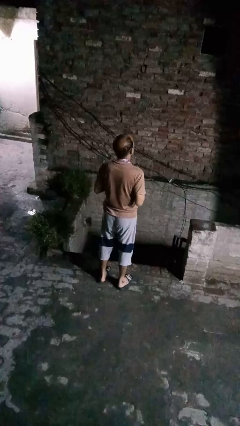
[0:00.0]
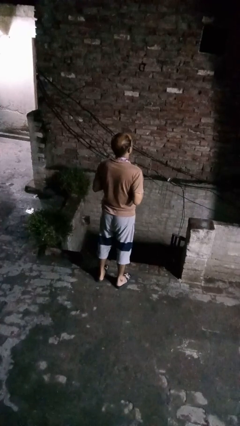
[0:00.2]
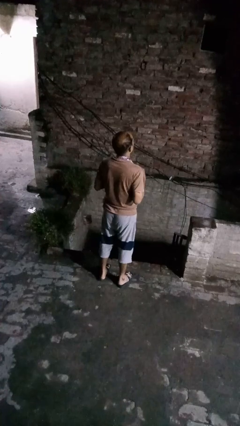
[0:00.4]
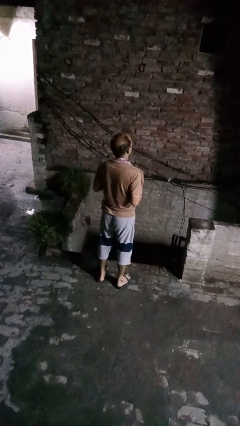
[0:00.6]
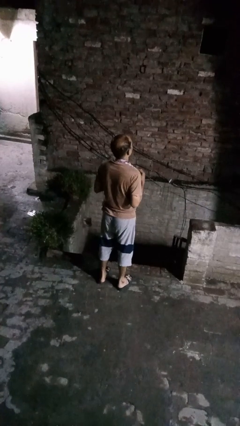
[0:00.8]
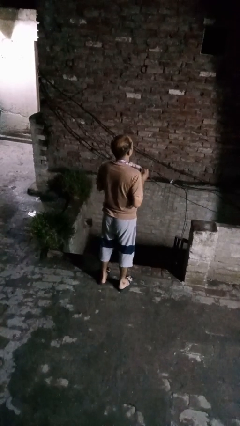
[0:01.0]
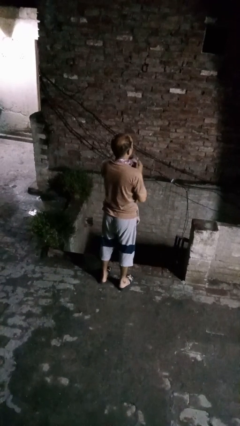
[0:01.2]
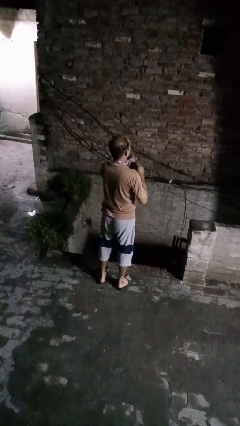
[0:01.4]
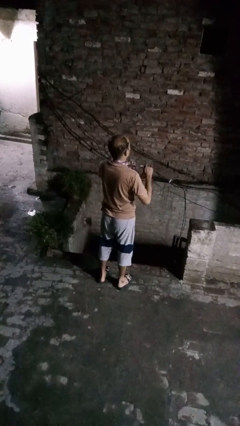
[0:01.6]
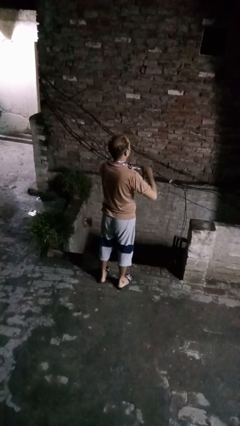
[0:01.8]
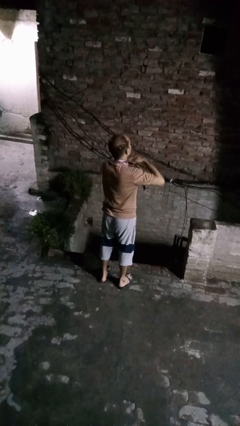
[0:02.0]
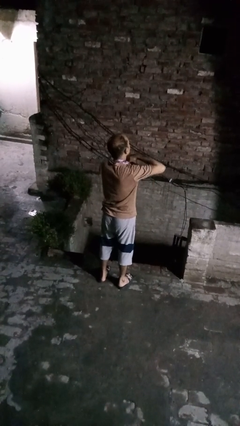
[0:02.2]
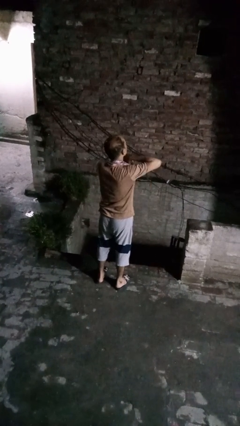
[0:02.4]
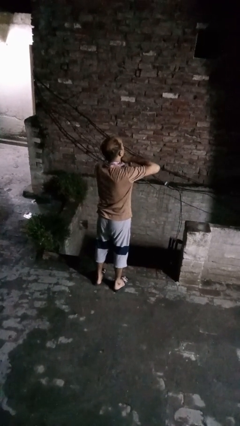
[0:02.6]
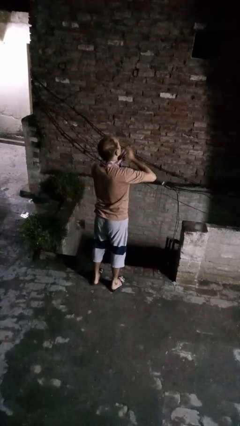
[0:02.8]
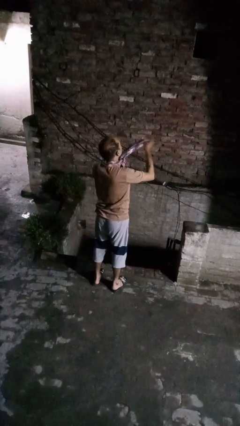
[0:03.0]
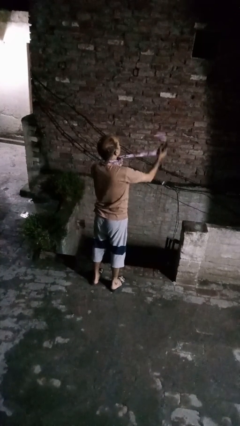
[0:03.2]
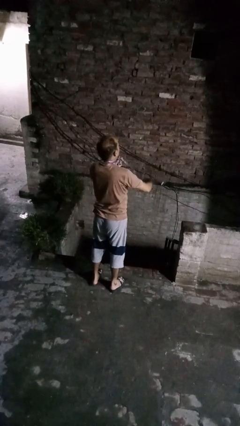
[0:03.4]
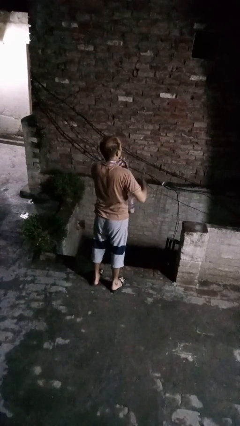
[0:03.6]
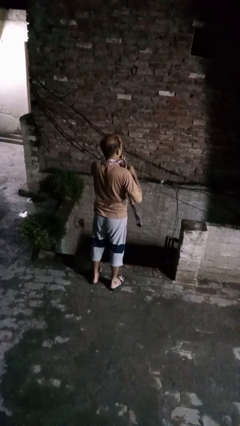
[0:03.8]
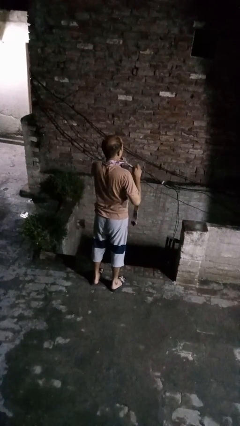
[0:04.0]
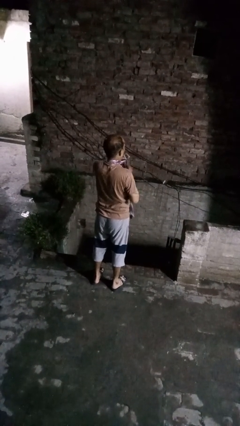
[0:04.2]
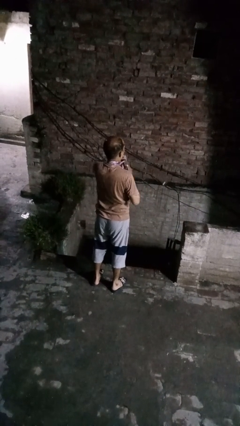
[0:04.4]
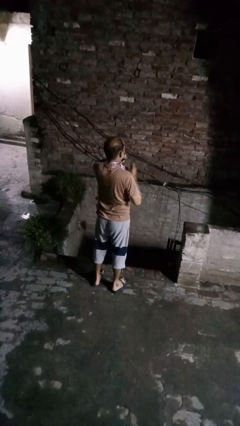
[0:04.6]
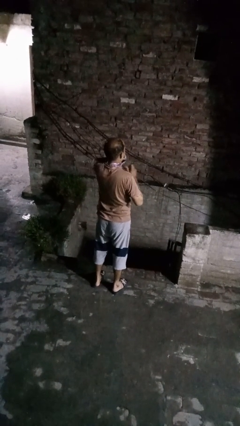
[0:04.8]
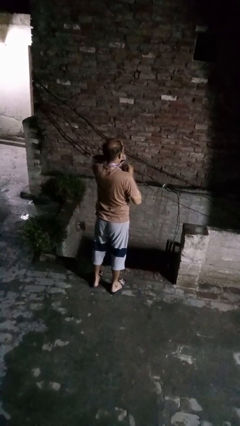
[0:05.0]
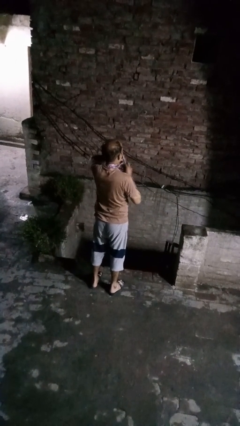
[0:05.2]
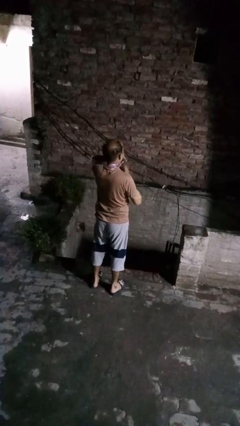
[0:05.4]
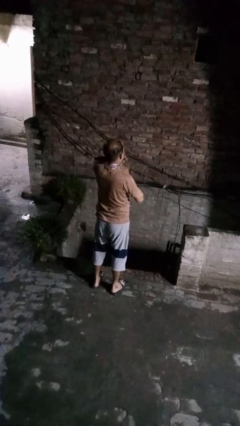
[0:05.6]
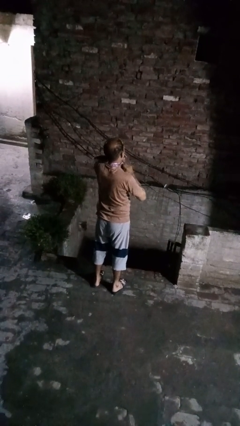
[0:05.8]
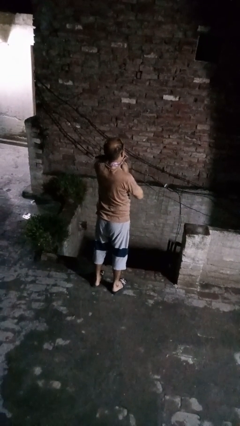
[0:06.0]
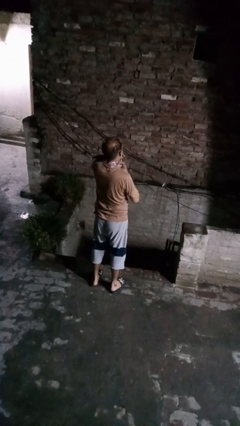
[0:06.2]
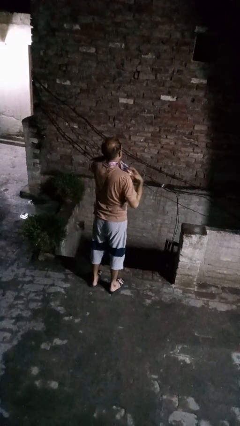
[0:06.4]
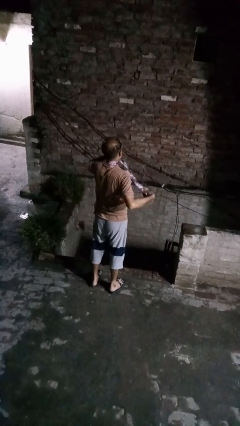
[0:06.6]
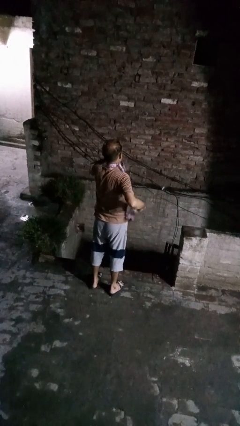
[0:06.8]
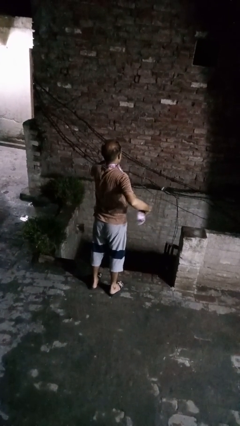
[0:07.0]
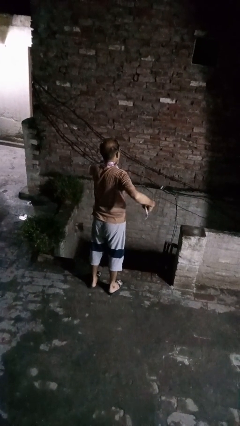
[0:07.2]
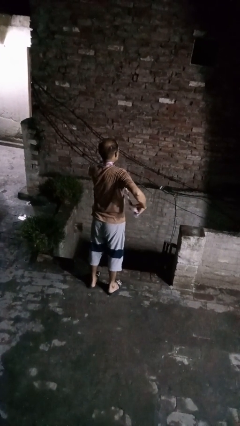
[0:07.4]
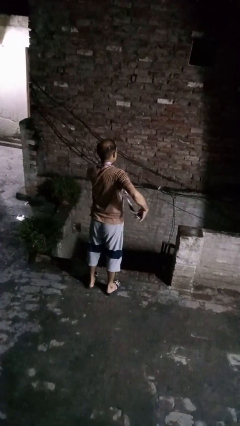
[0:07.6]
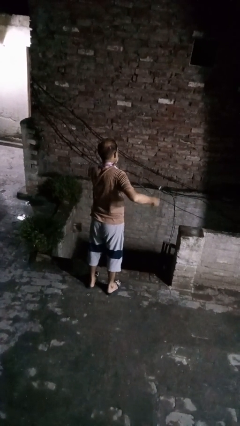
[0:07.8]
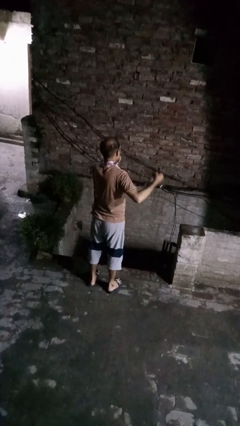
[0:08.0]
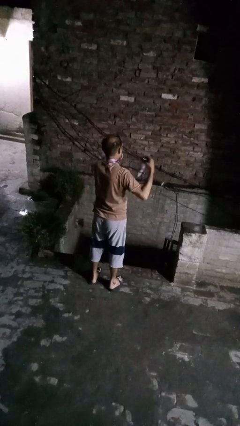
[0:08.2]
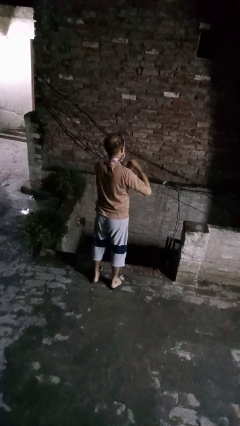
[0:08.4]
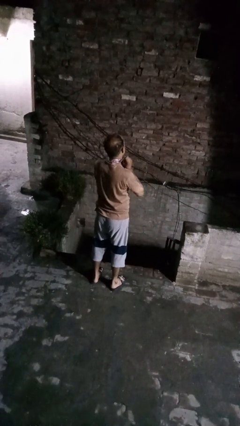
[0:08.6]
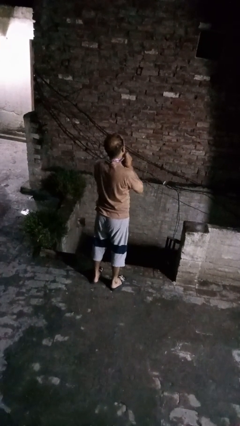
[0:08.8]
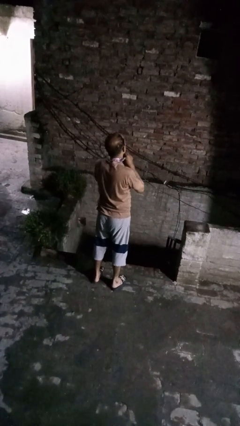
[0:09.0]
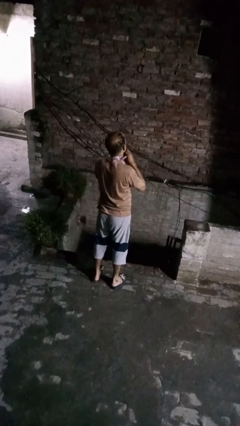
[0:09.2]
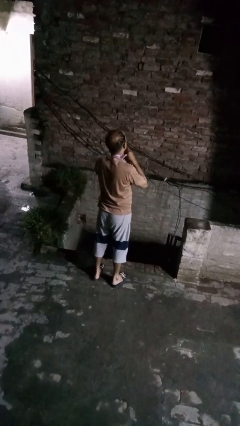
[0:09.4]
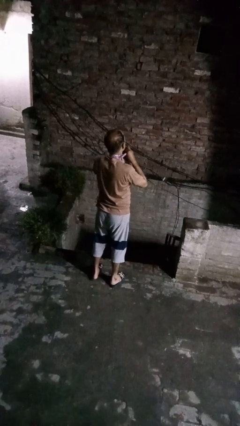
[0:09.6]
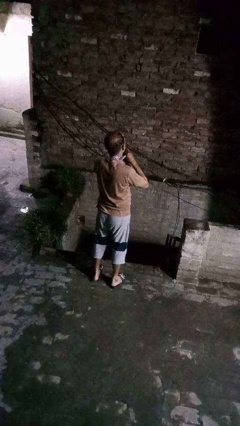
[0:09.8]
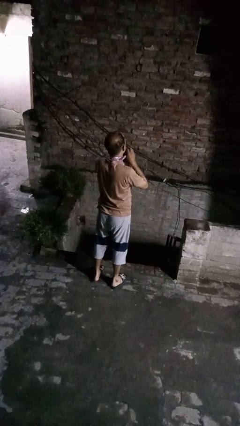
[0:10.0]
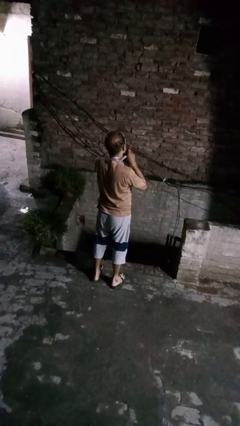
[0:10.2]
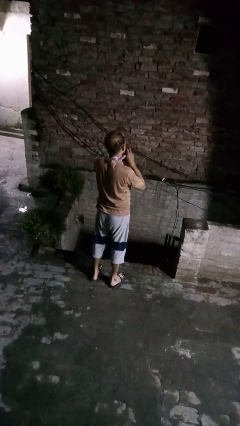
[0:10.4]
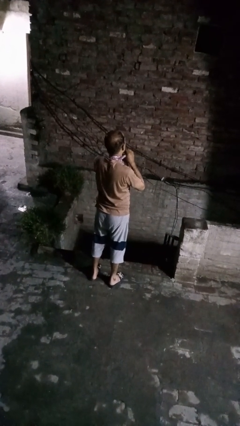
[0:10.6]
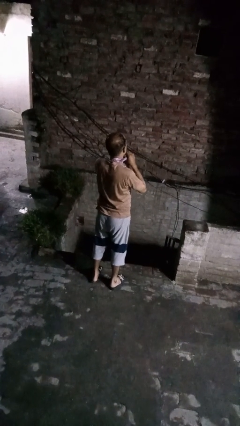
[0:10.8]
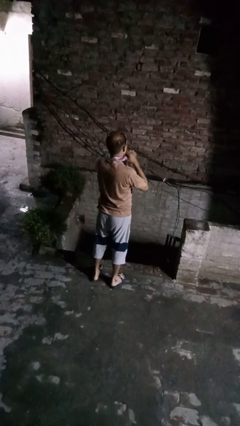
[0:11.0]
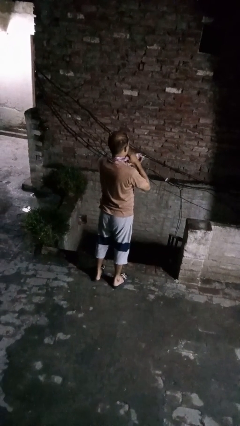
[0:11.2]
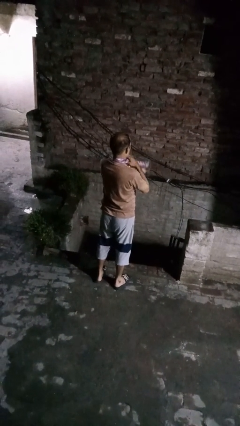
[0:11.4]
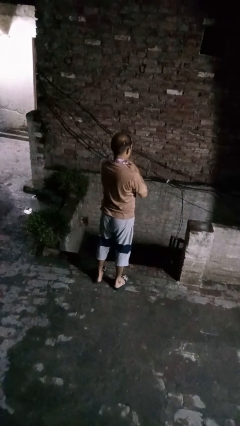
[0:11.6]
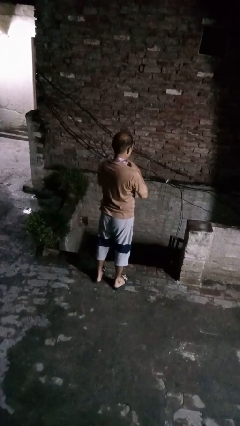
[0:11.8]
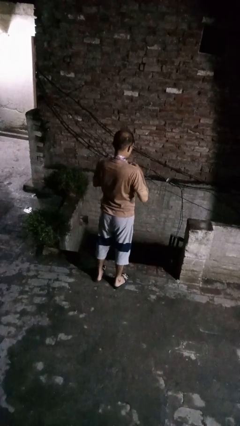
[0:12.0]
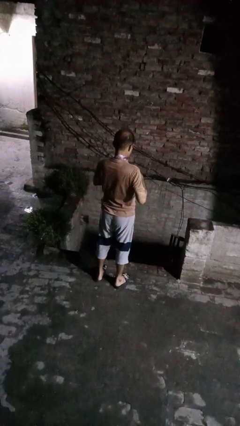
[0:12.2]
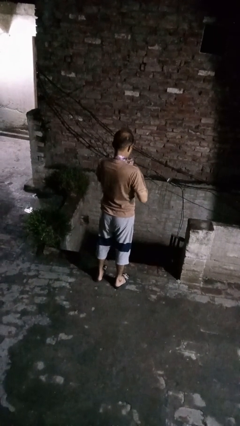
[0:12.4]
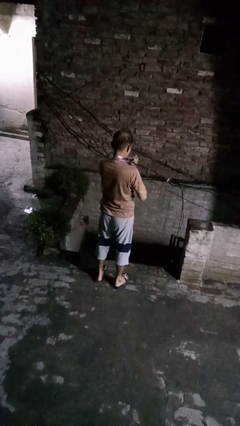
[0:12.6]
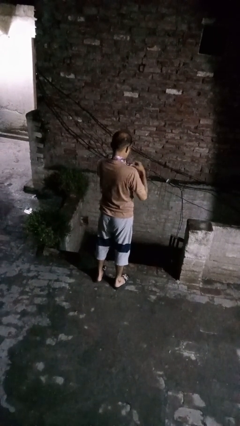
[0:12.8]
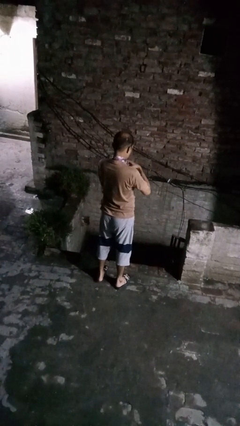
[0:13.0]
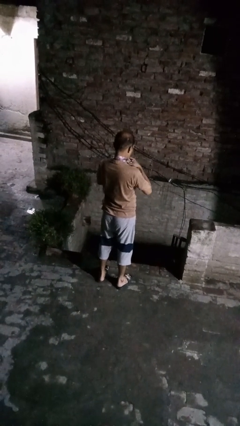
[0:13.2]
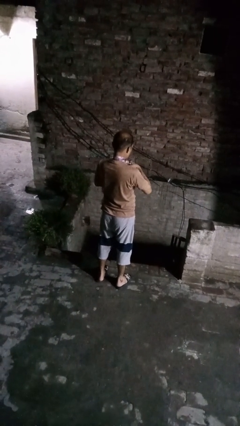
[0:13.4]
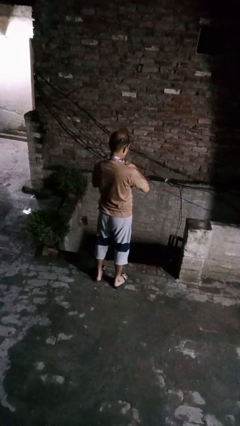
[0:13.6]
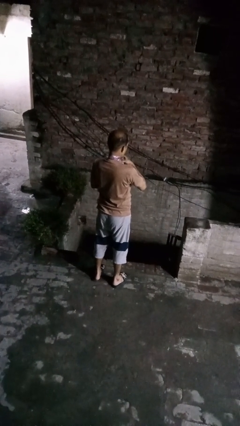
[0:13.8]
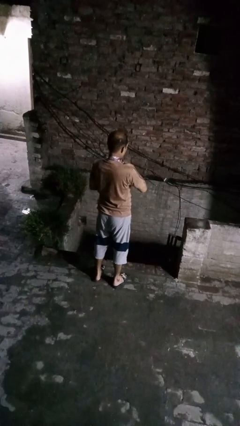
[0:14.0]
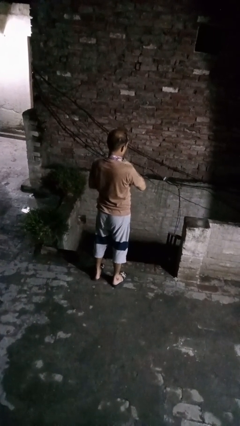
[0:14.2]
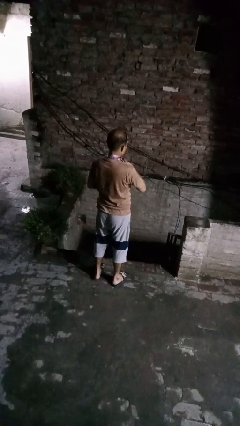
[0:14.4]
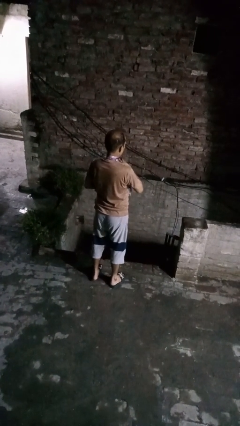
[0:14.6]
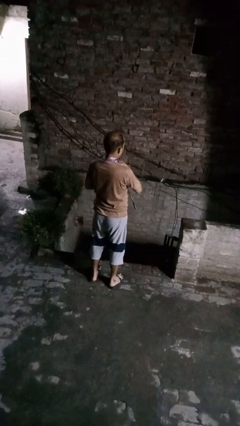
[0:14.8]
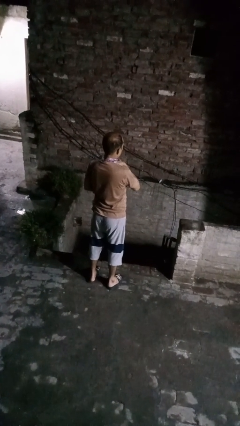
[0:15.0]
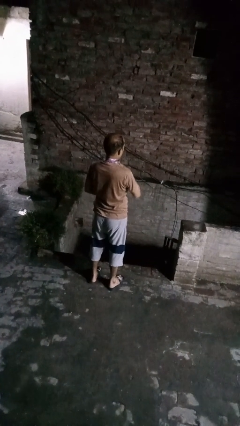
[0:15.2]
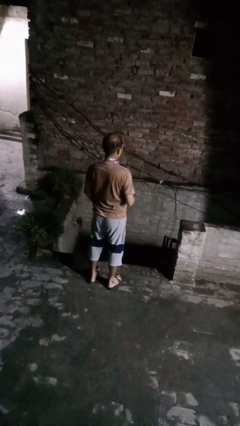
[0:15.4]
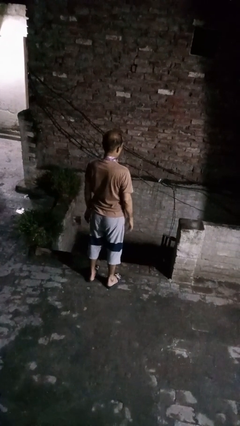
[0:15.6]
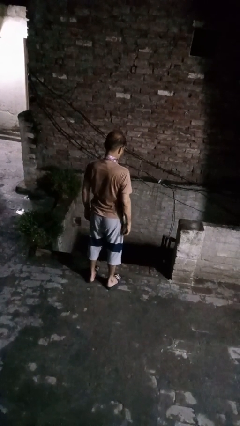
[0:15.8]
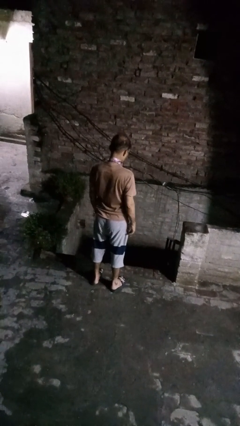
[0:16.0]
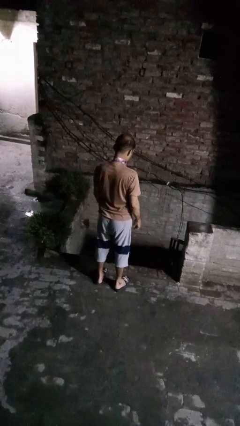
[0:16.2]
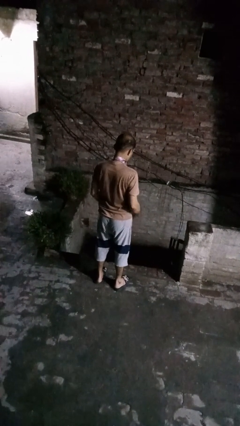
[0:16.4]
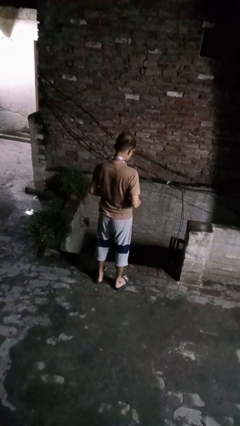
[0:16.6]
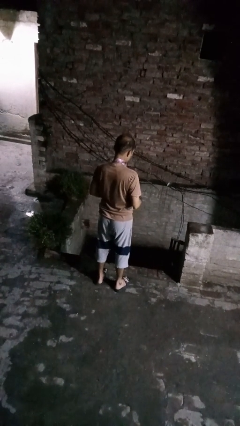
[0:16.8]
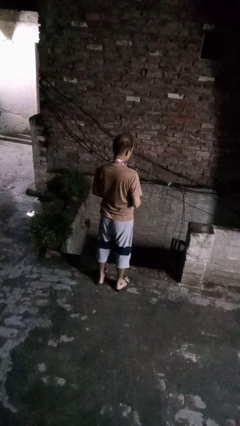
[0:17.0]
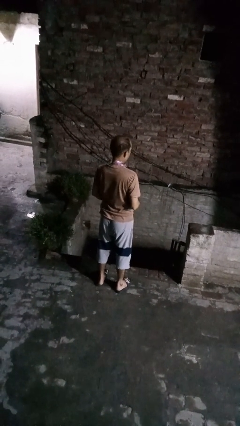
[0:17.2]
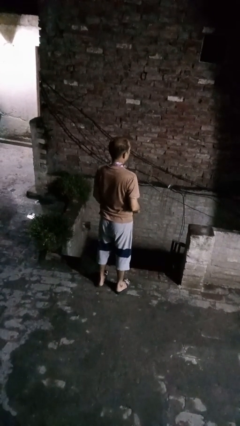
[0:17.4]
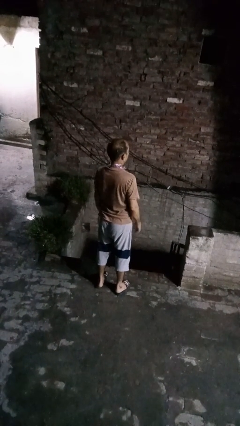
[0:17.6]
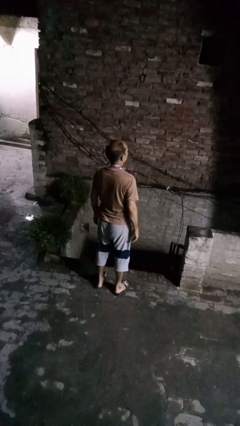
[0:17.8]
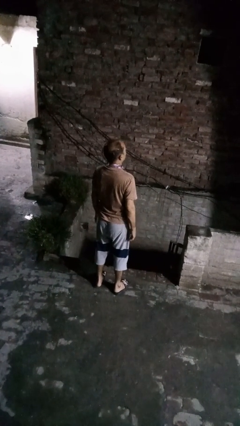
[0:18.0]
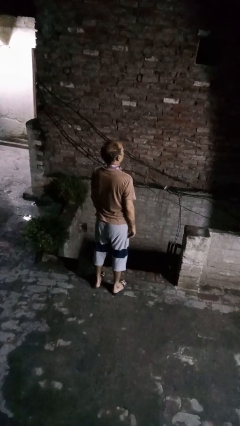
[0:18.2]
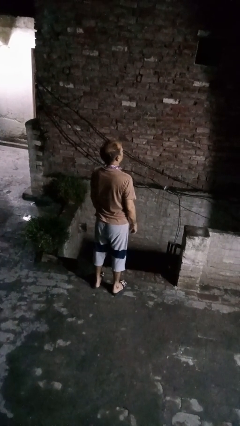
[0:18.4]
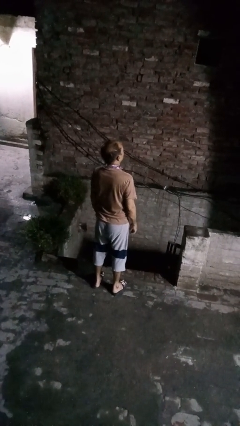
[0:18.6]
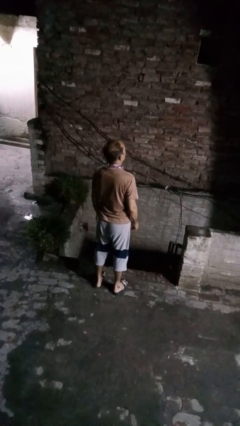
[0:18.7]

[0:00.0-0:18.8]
person puts on necktie
